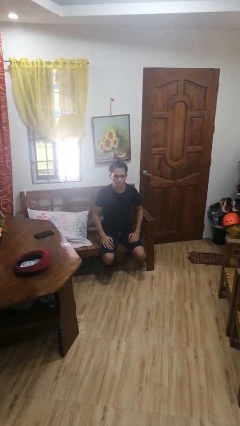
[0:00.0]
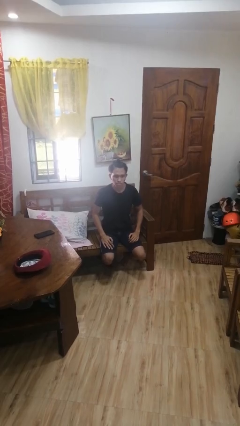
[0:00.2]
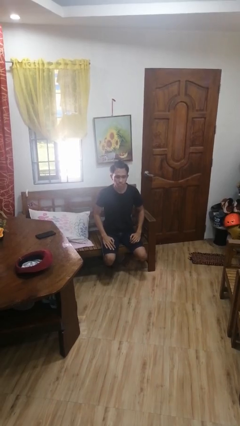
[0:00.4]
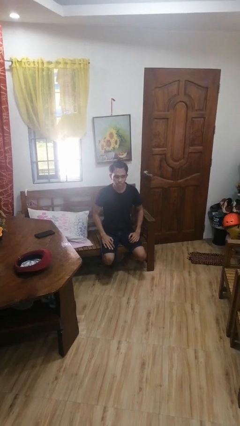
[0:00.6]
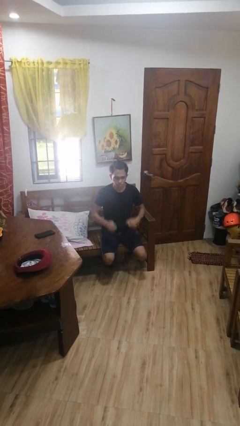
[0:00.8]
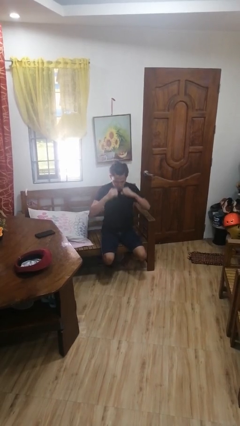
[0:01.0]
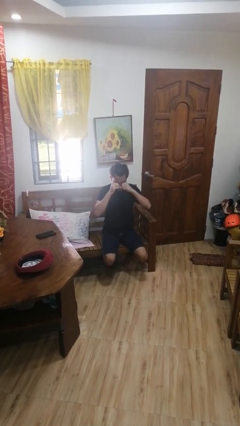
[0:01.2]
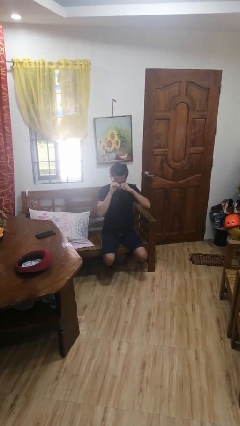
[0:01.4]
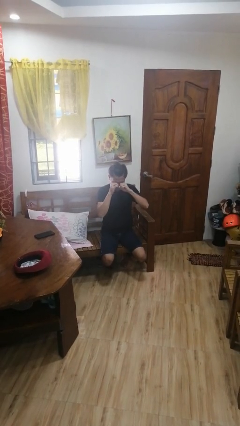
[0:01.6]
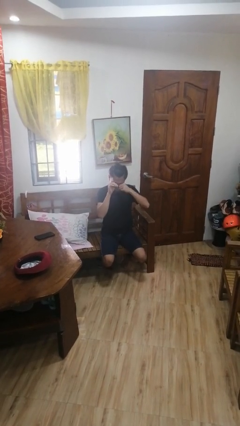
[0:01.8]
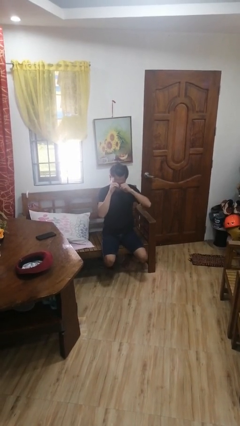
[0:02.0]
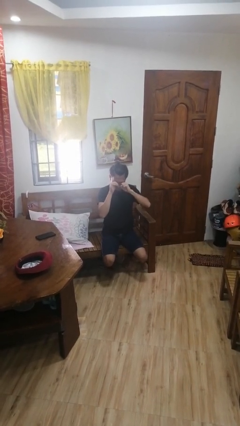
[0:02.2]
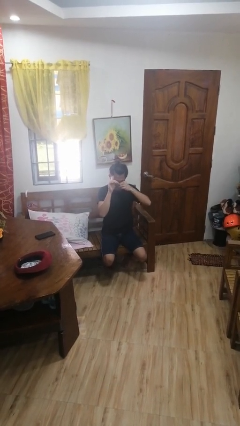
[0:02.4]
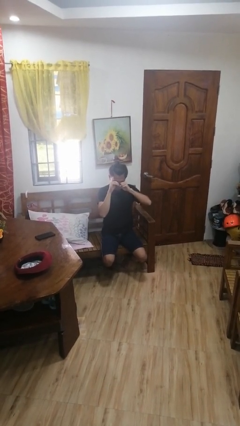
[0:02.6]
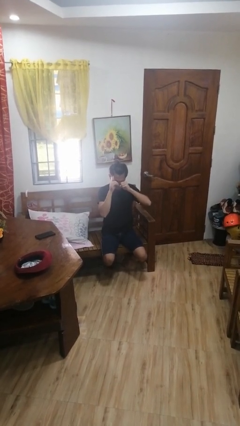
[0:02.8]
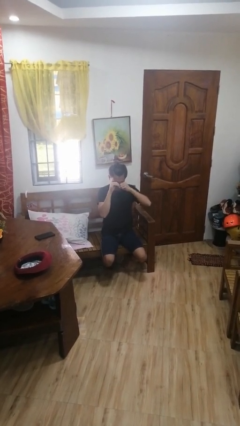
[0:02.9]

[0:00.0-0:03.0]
person rubs eyes

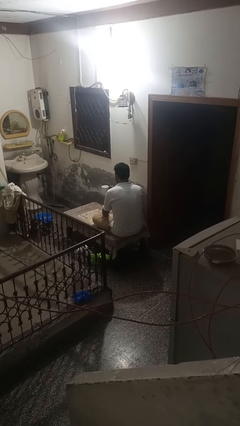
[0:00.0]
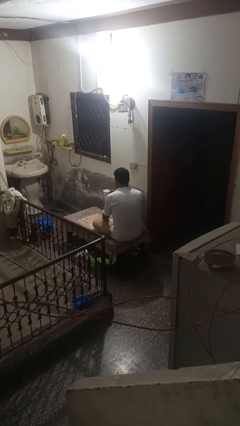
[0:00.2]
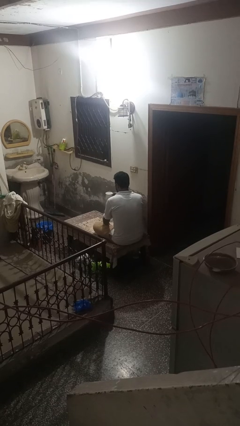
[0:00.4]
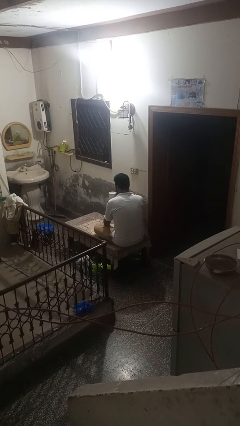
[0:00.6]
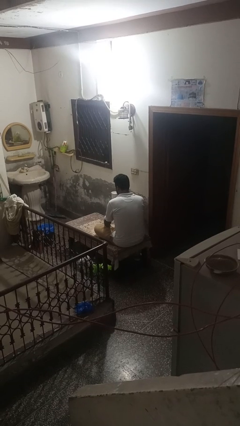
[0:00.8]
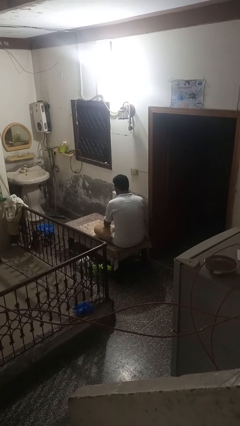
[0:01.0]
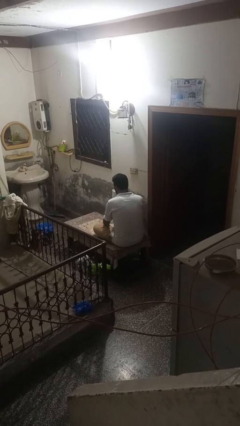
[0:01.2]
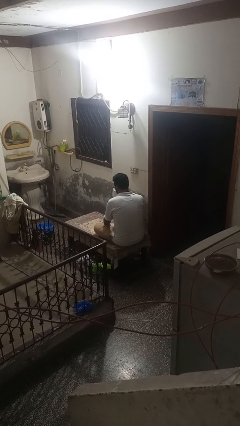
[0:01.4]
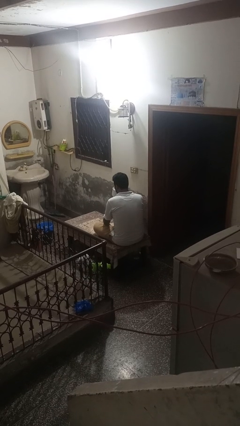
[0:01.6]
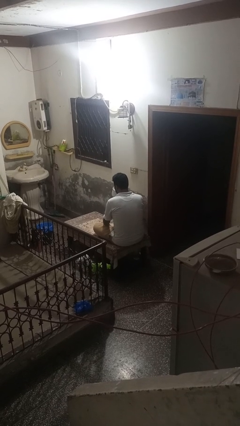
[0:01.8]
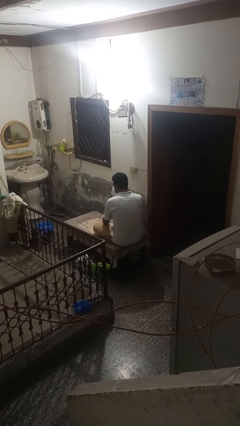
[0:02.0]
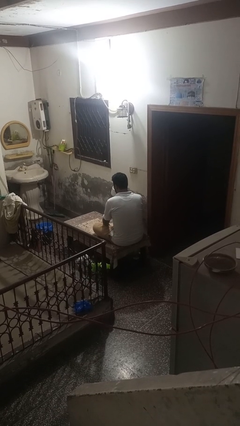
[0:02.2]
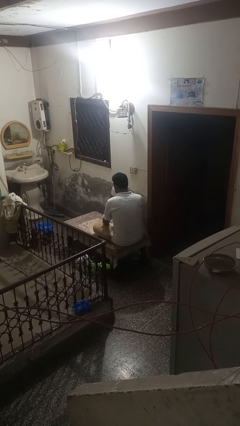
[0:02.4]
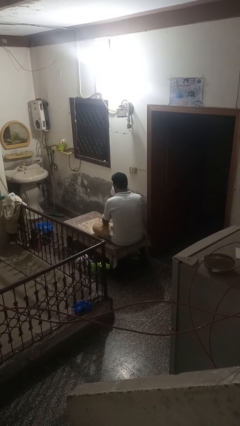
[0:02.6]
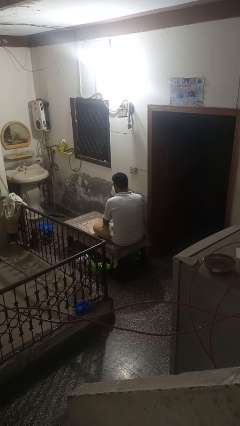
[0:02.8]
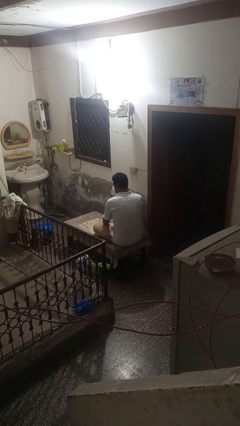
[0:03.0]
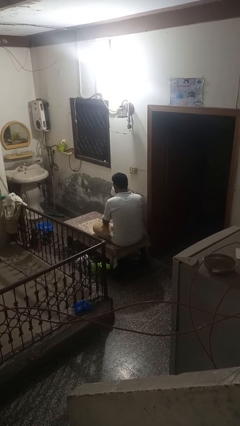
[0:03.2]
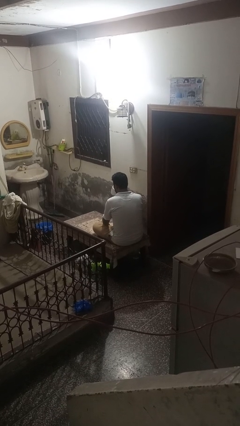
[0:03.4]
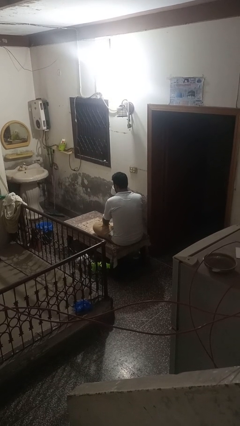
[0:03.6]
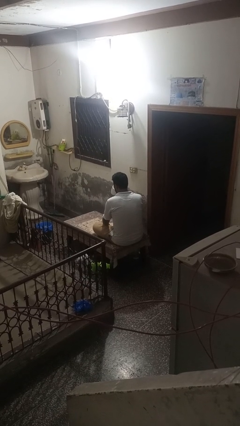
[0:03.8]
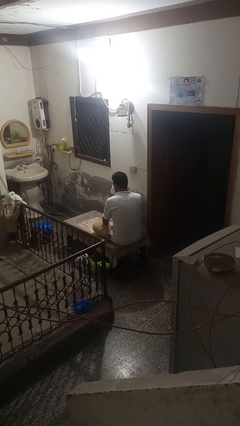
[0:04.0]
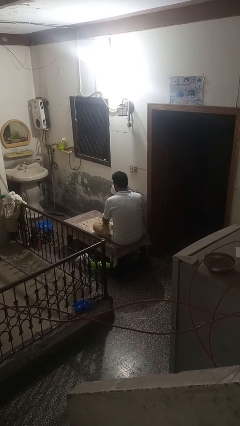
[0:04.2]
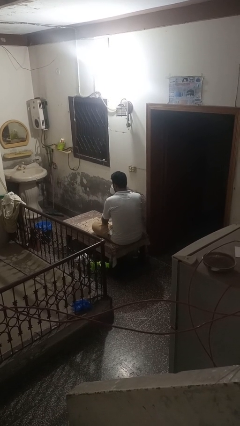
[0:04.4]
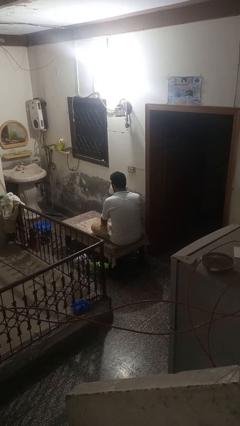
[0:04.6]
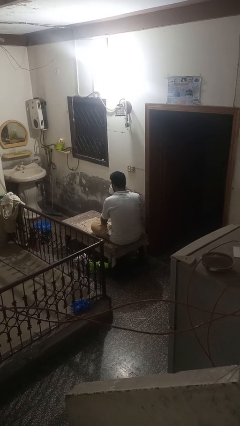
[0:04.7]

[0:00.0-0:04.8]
person drinks from mug

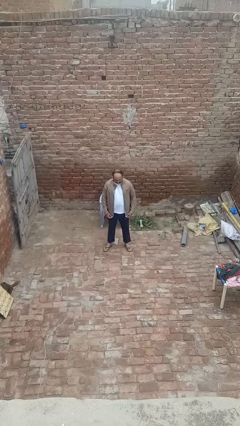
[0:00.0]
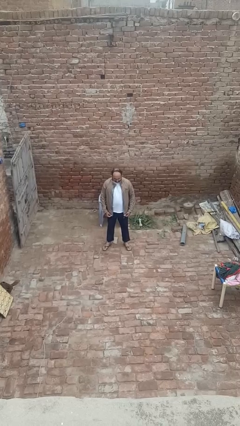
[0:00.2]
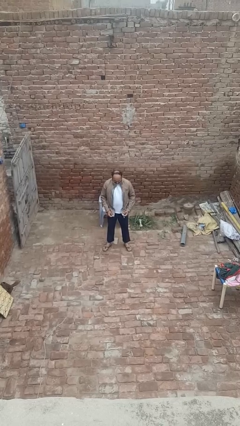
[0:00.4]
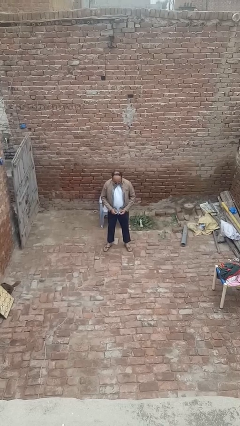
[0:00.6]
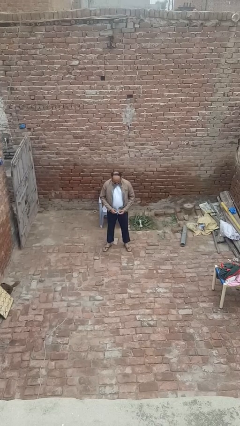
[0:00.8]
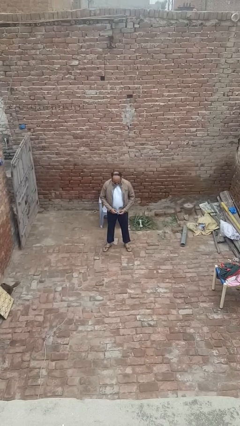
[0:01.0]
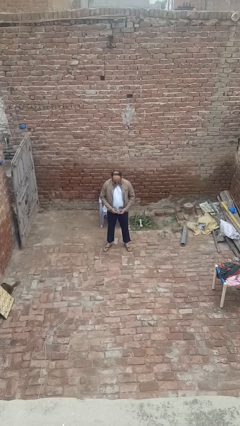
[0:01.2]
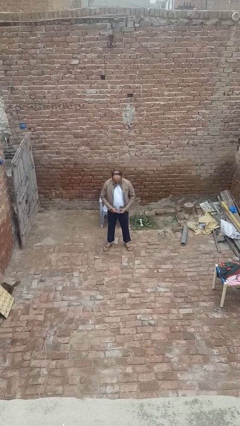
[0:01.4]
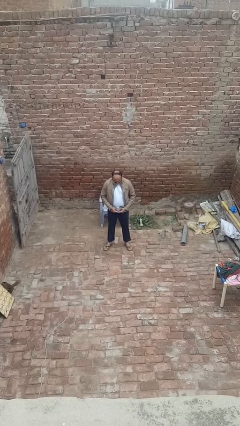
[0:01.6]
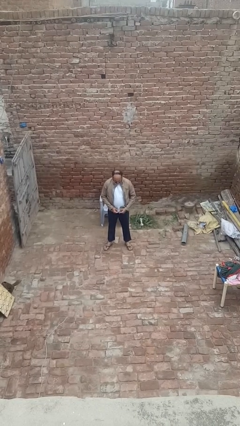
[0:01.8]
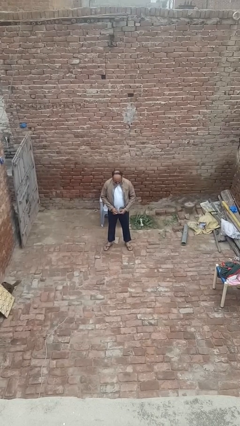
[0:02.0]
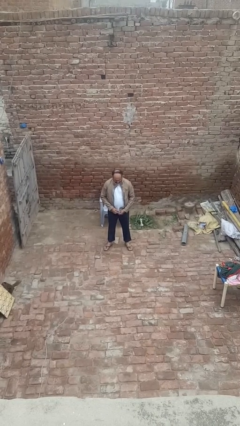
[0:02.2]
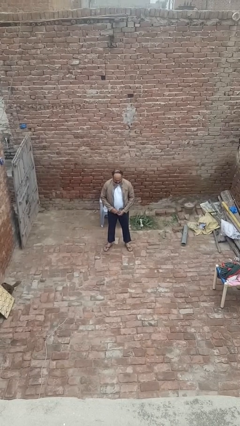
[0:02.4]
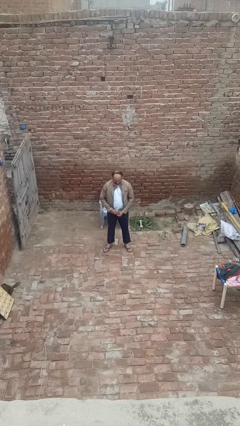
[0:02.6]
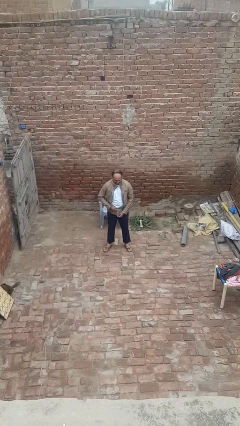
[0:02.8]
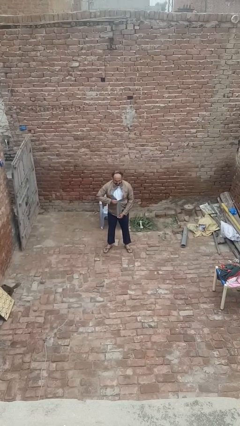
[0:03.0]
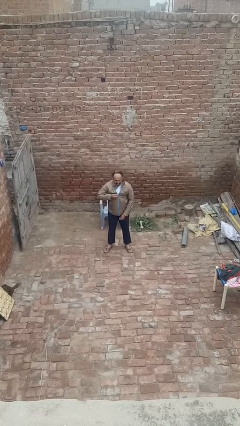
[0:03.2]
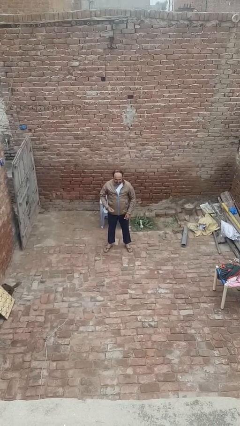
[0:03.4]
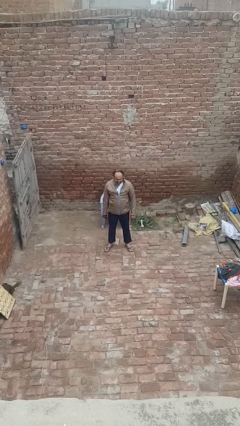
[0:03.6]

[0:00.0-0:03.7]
person zips up jacket

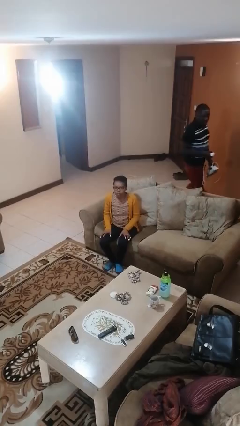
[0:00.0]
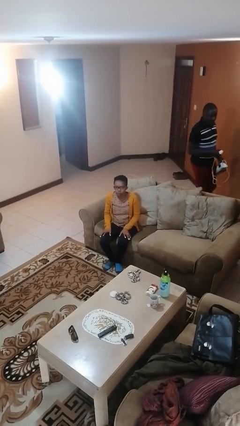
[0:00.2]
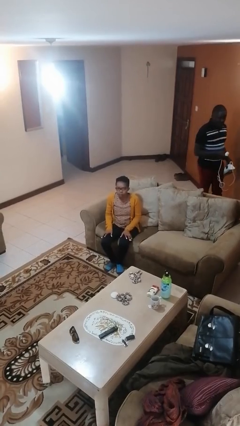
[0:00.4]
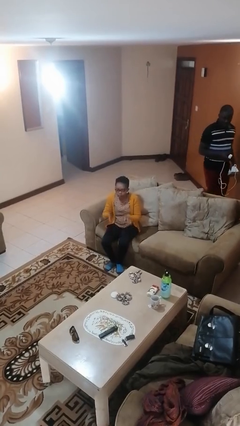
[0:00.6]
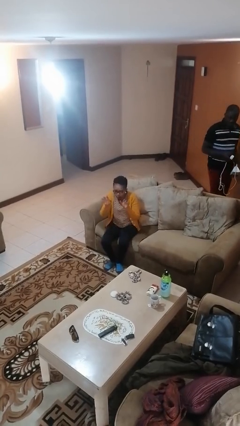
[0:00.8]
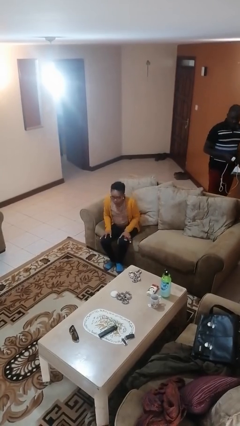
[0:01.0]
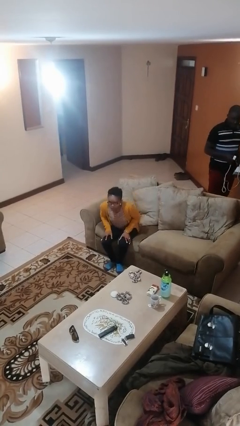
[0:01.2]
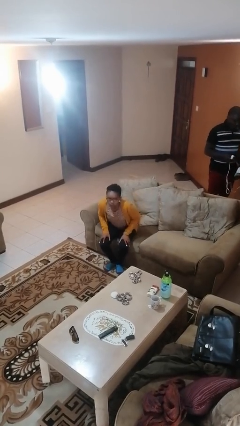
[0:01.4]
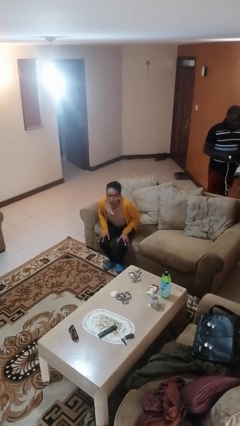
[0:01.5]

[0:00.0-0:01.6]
person slaps hands on thighs

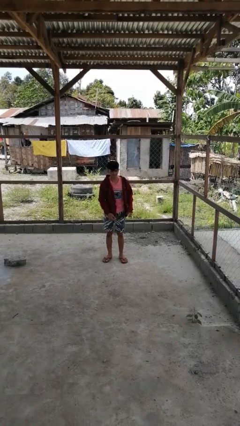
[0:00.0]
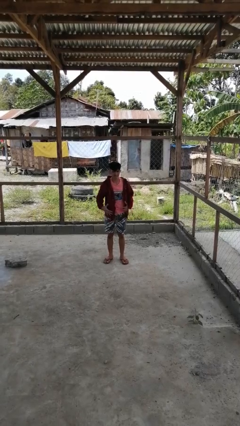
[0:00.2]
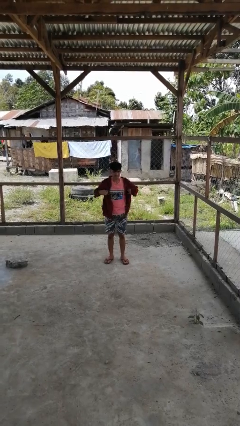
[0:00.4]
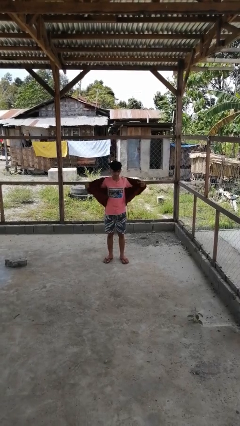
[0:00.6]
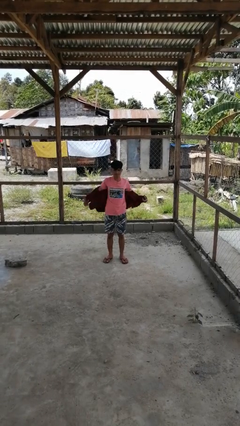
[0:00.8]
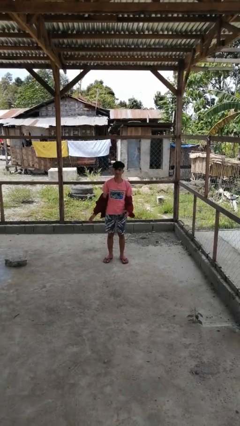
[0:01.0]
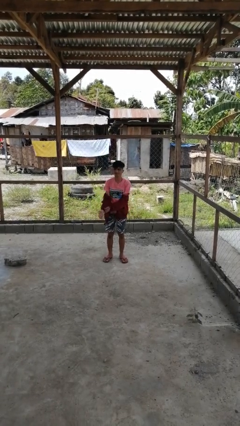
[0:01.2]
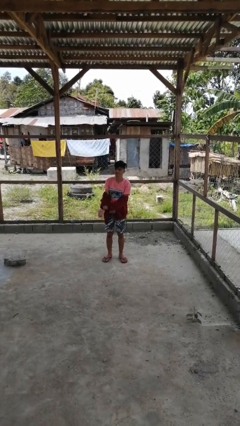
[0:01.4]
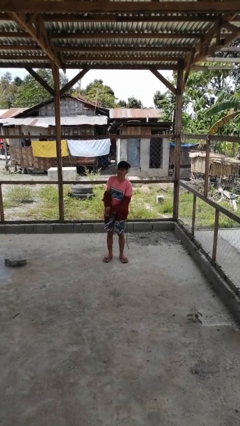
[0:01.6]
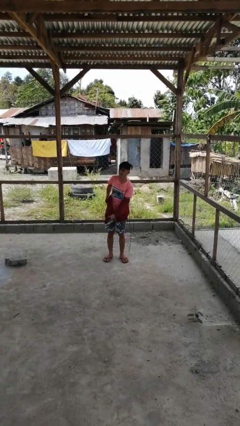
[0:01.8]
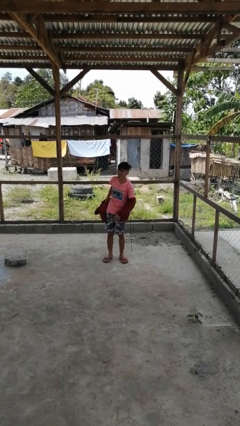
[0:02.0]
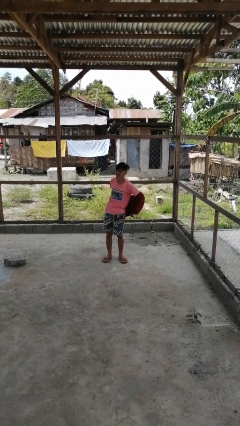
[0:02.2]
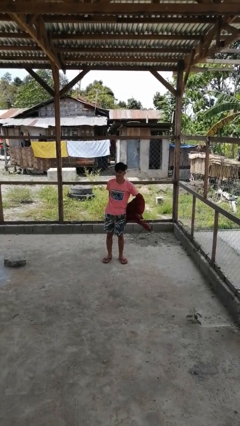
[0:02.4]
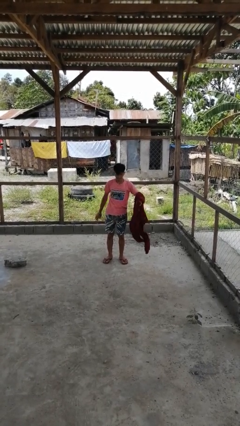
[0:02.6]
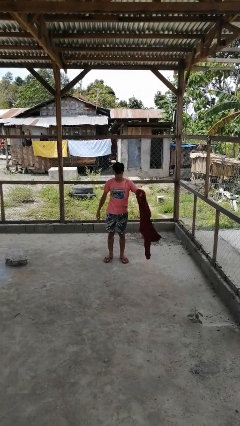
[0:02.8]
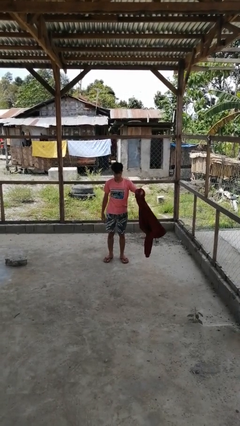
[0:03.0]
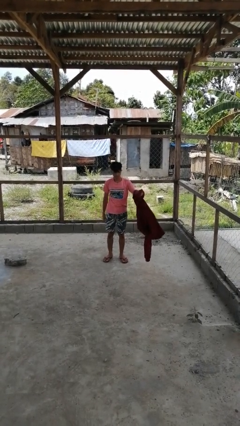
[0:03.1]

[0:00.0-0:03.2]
person takes off jacket

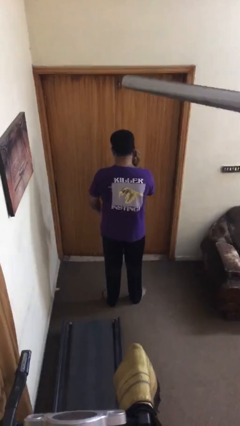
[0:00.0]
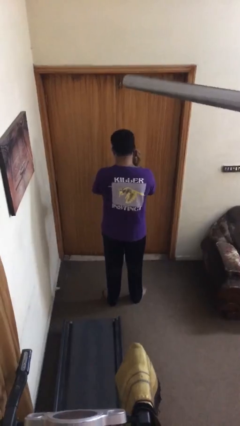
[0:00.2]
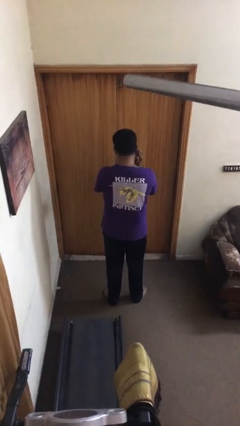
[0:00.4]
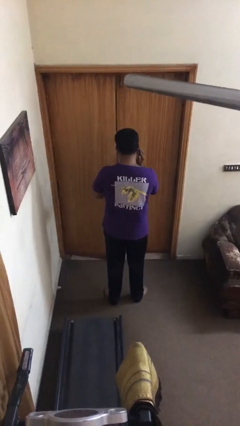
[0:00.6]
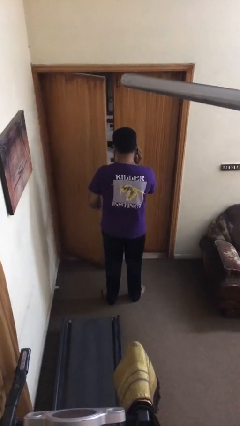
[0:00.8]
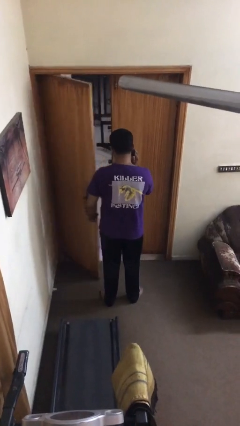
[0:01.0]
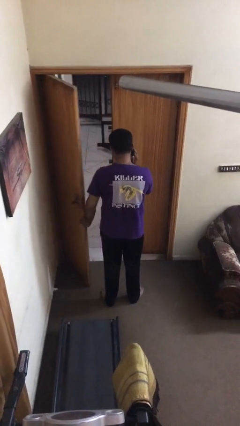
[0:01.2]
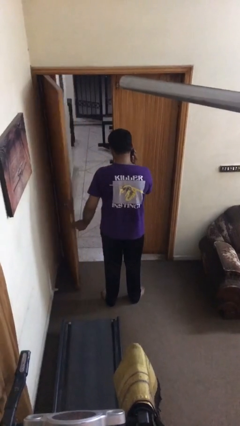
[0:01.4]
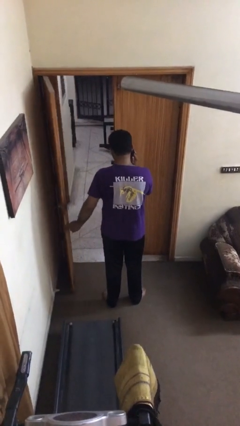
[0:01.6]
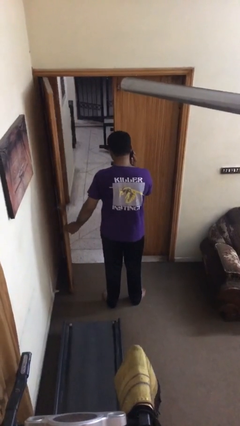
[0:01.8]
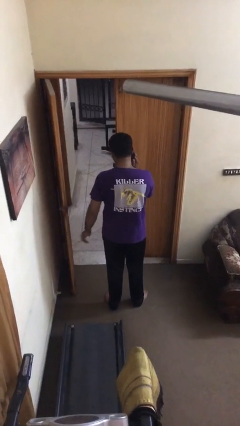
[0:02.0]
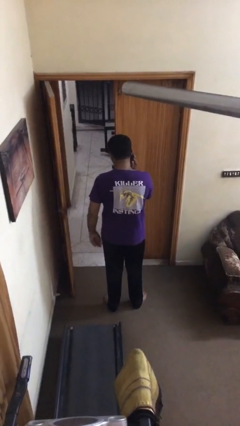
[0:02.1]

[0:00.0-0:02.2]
person opens facility door
